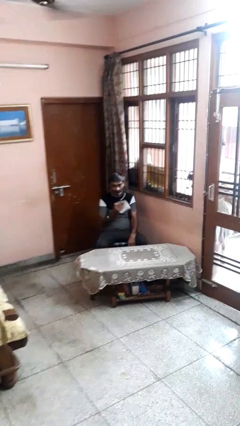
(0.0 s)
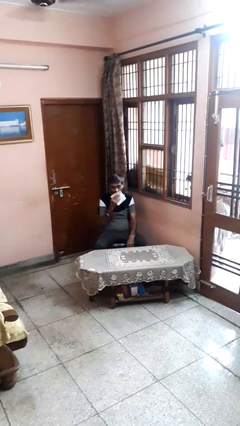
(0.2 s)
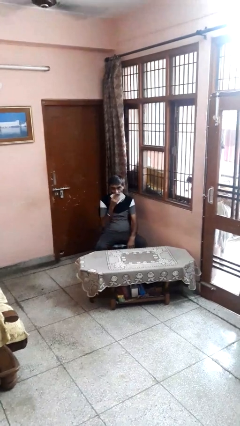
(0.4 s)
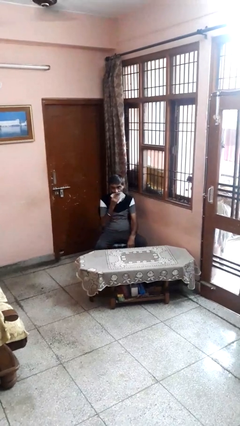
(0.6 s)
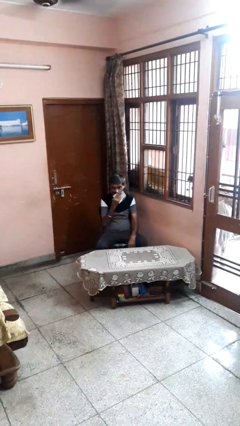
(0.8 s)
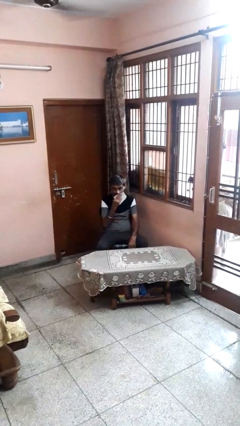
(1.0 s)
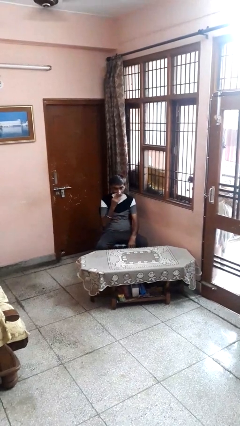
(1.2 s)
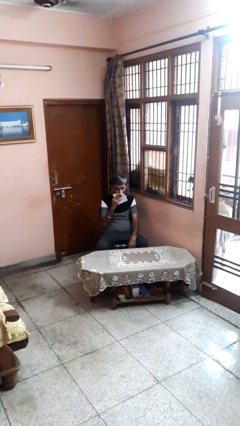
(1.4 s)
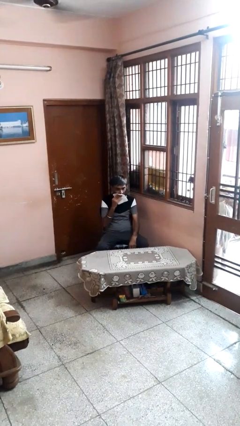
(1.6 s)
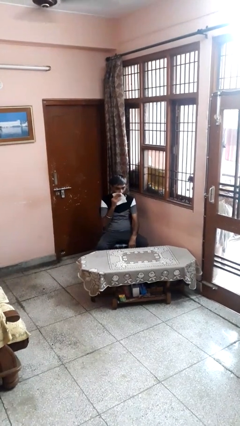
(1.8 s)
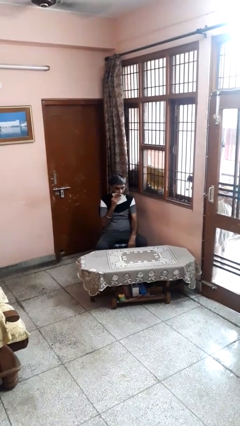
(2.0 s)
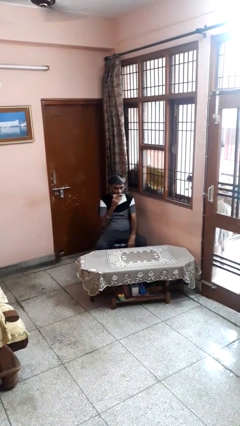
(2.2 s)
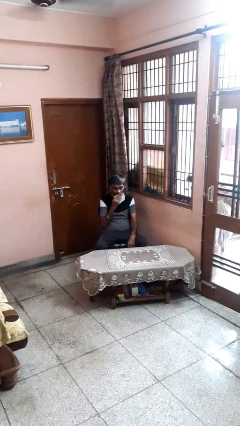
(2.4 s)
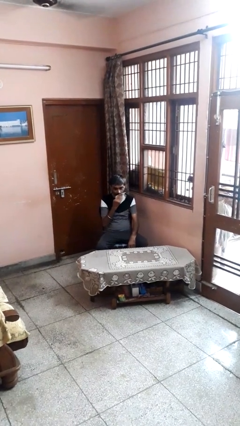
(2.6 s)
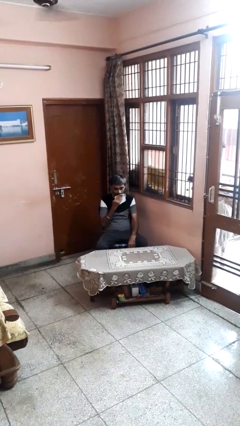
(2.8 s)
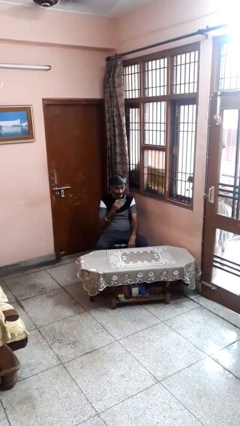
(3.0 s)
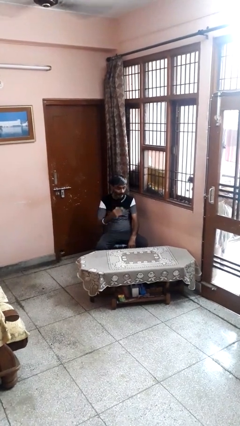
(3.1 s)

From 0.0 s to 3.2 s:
person wipes mouth with napkin

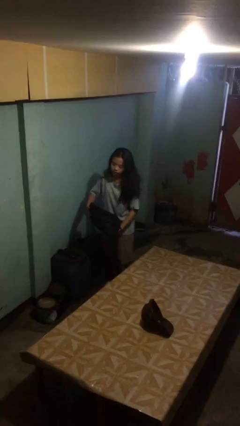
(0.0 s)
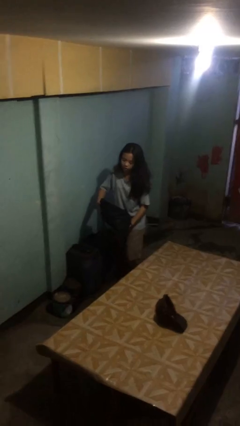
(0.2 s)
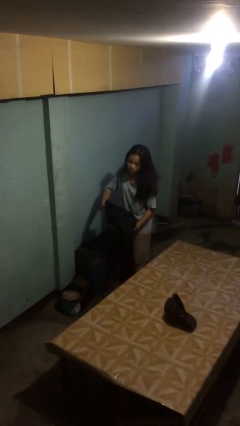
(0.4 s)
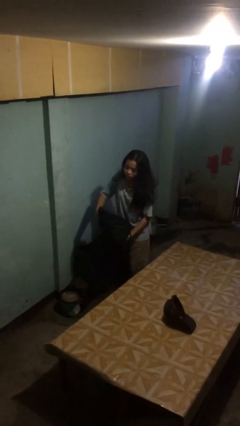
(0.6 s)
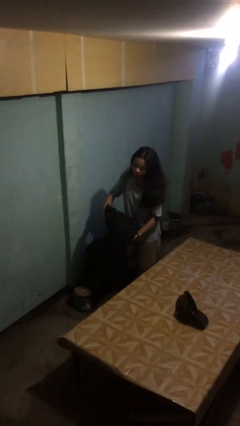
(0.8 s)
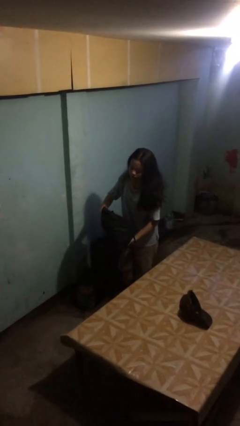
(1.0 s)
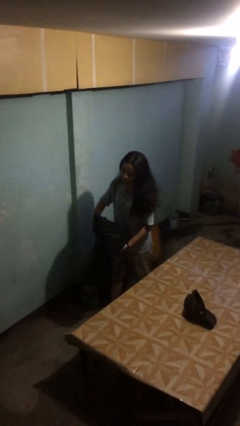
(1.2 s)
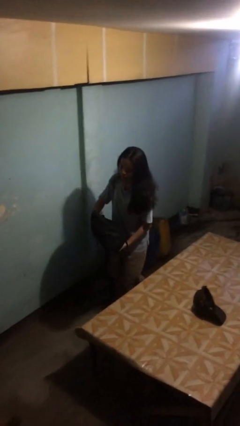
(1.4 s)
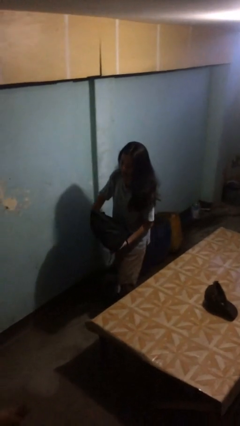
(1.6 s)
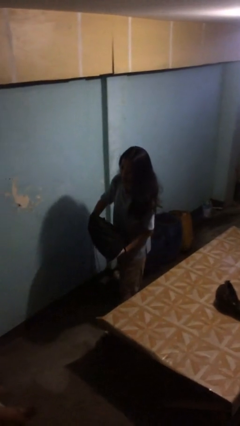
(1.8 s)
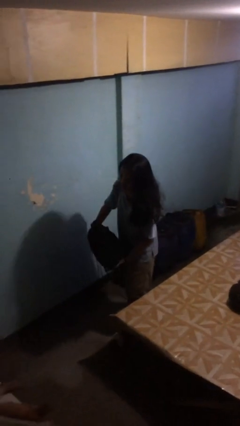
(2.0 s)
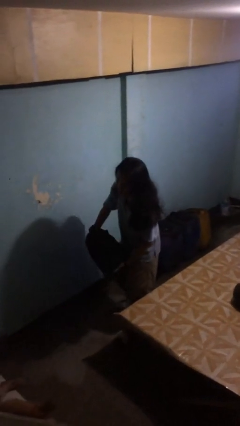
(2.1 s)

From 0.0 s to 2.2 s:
person carries heavy object

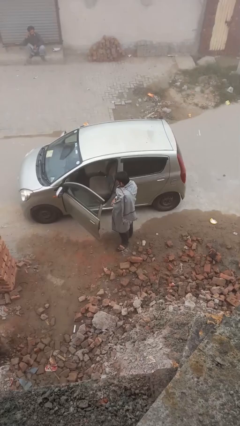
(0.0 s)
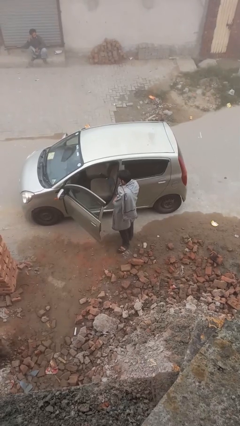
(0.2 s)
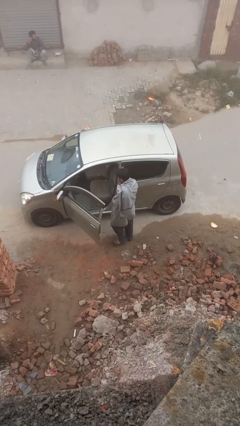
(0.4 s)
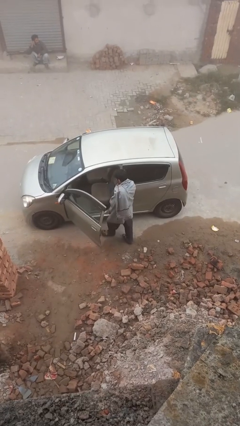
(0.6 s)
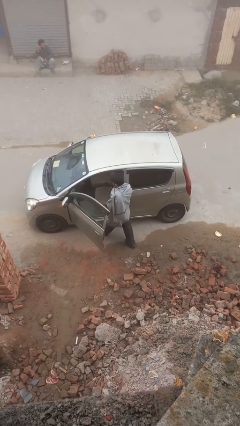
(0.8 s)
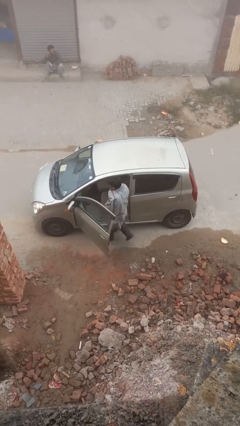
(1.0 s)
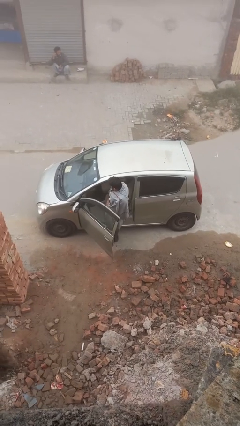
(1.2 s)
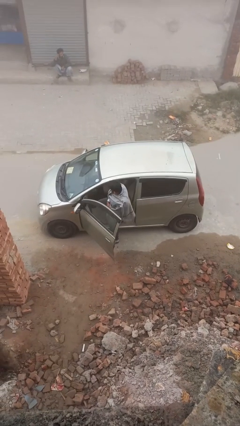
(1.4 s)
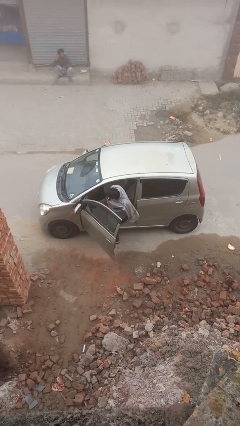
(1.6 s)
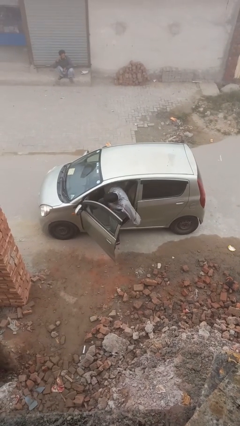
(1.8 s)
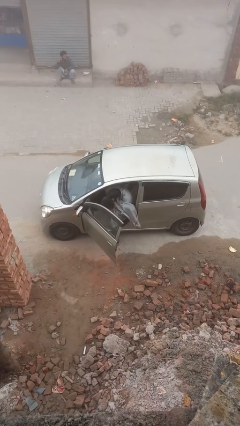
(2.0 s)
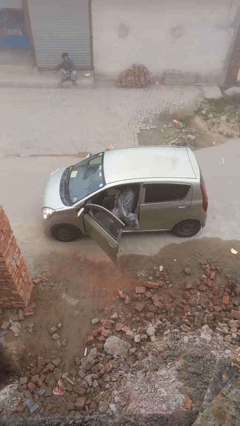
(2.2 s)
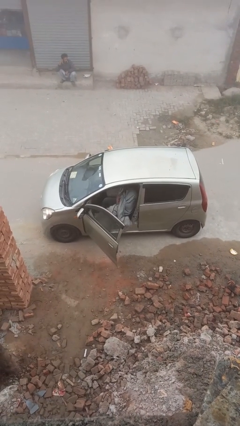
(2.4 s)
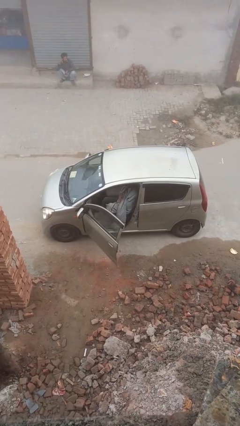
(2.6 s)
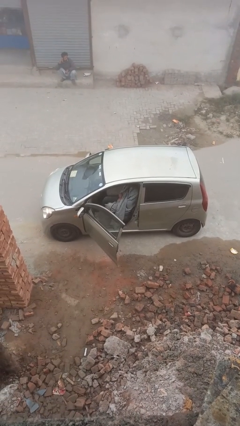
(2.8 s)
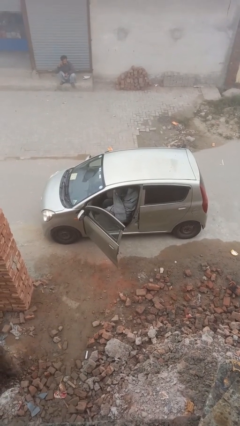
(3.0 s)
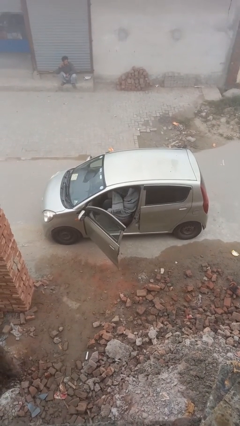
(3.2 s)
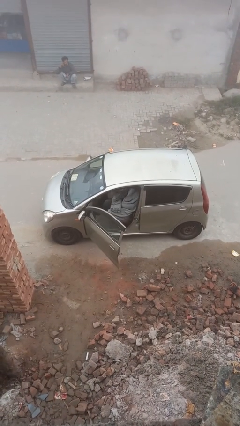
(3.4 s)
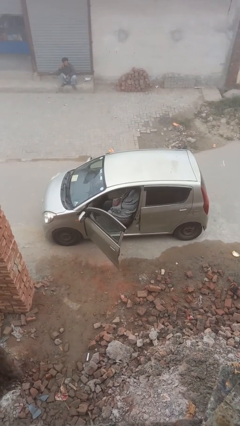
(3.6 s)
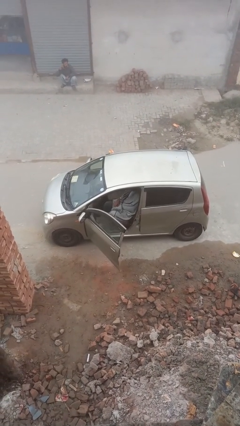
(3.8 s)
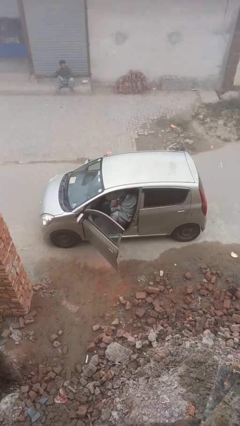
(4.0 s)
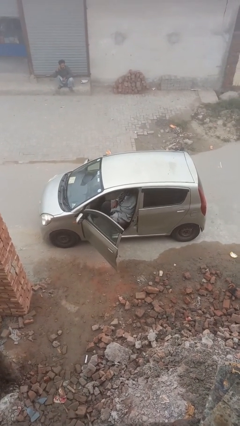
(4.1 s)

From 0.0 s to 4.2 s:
person enters car

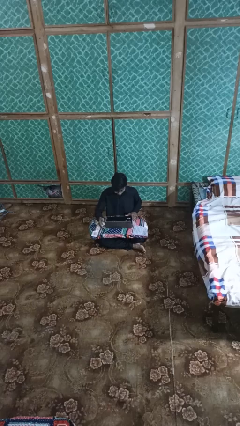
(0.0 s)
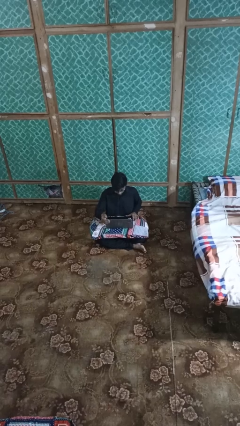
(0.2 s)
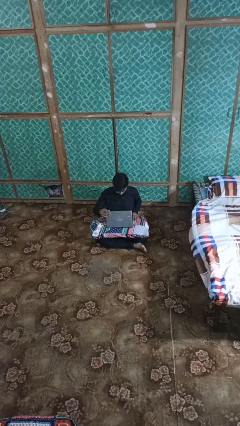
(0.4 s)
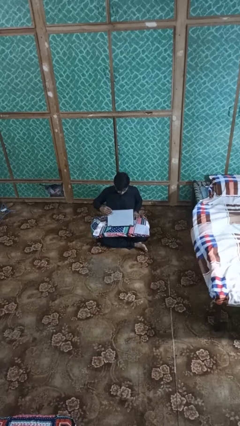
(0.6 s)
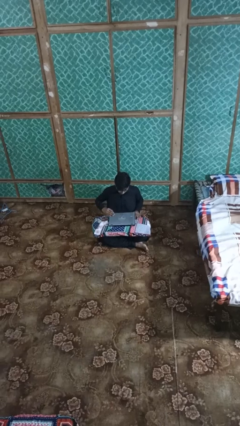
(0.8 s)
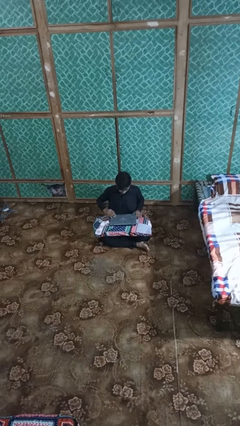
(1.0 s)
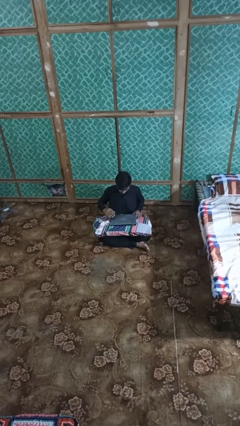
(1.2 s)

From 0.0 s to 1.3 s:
person closes laptop

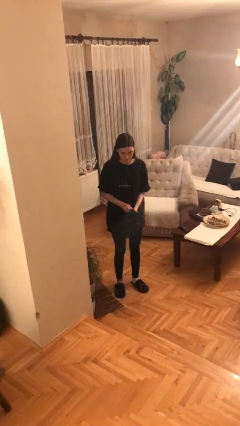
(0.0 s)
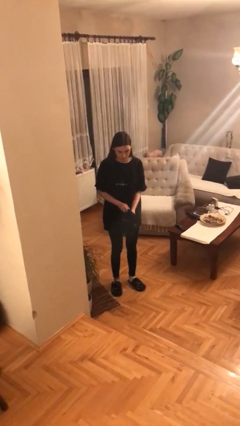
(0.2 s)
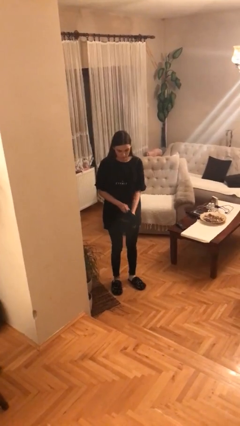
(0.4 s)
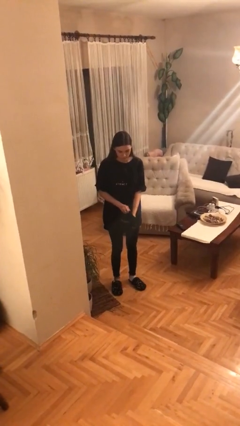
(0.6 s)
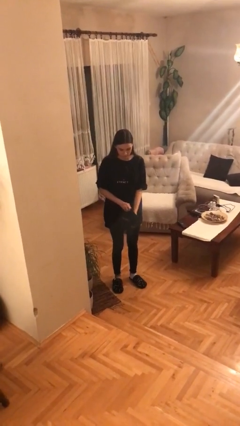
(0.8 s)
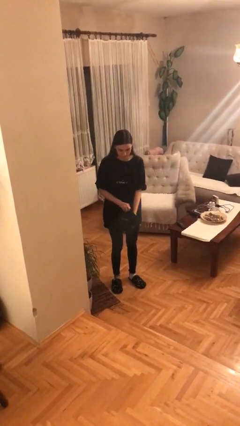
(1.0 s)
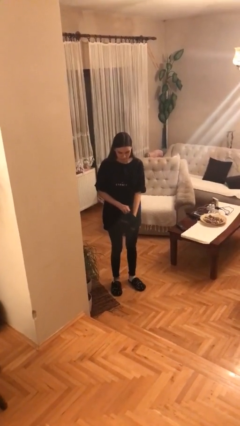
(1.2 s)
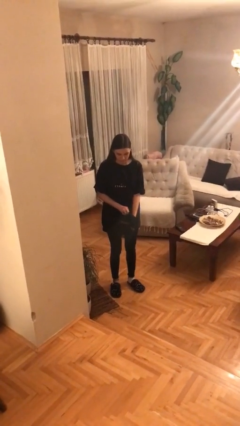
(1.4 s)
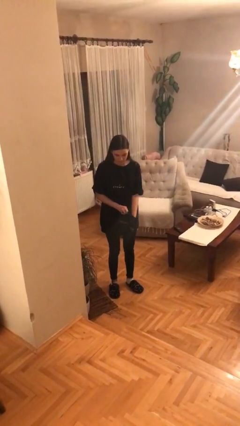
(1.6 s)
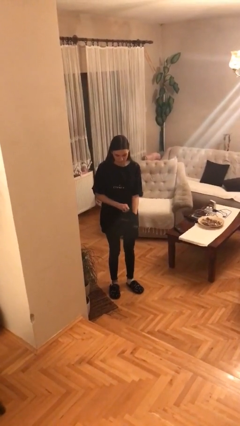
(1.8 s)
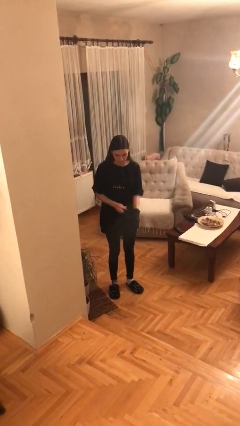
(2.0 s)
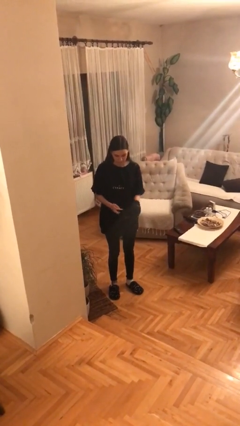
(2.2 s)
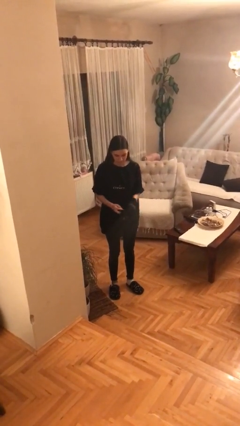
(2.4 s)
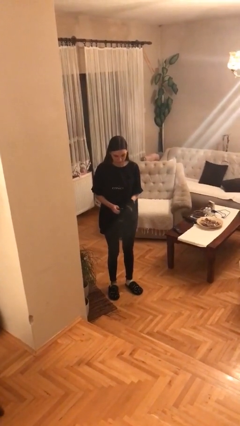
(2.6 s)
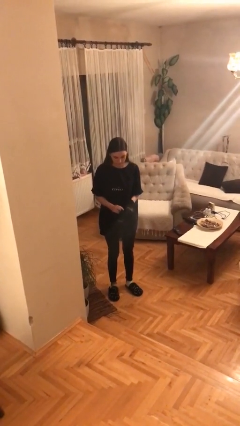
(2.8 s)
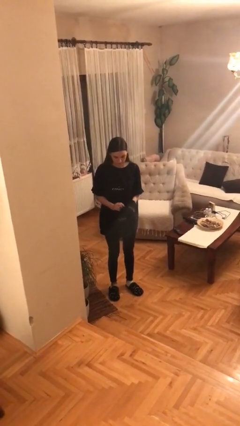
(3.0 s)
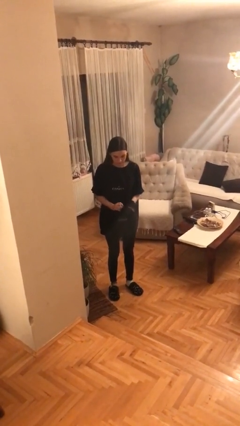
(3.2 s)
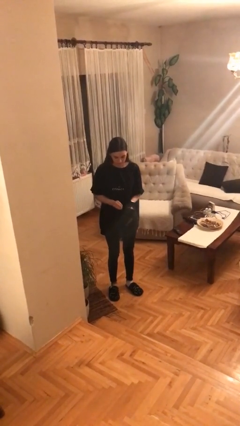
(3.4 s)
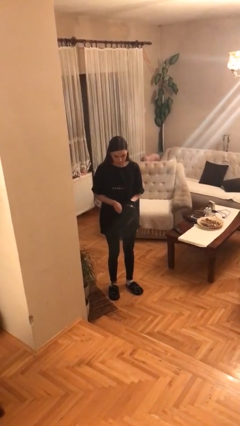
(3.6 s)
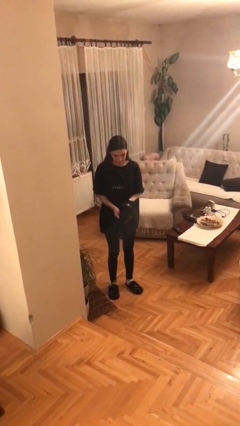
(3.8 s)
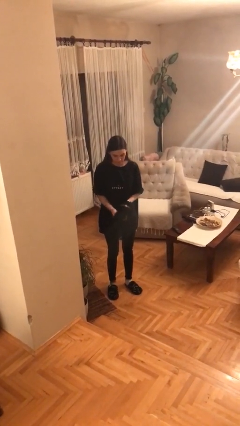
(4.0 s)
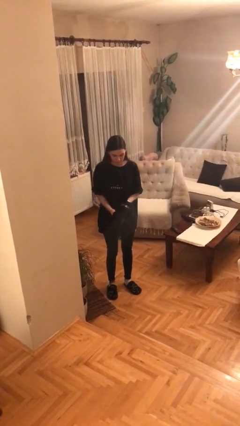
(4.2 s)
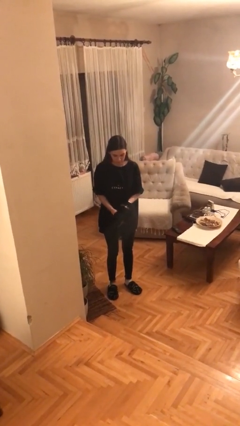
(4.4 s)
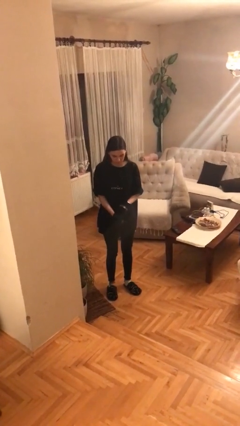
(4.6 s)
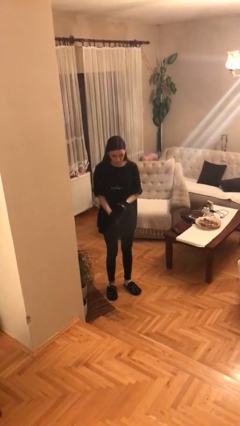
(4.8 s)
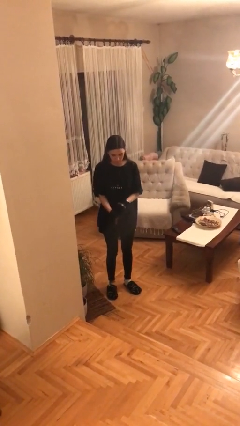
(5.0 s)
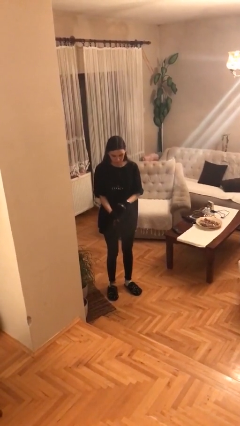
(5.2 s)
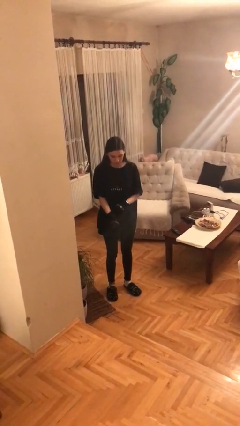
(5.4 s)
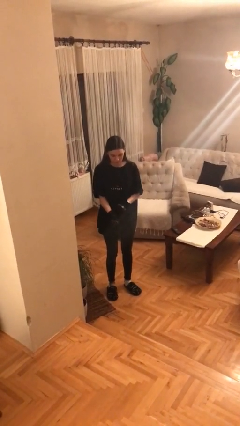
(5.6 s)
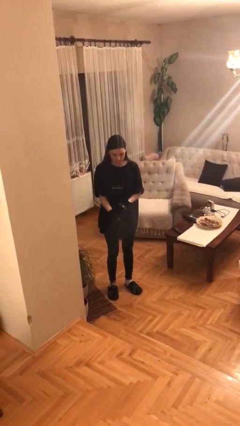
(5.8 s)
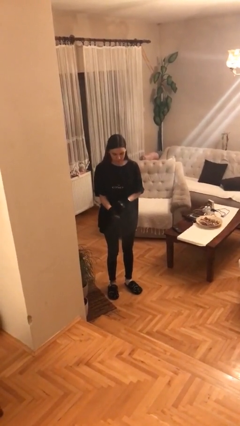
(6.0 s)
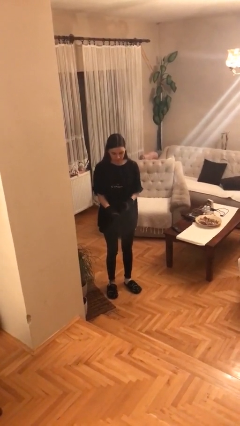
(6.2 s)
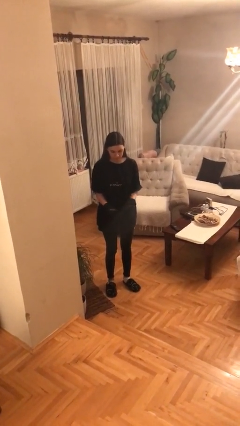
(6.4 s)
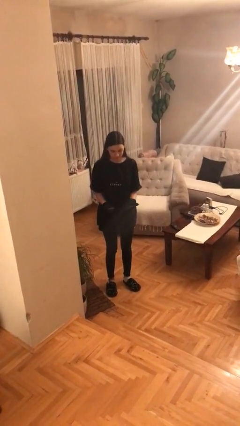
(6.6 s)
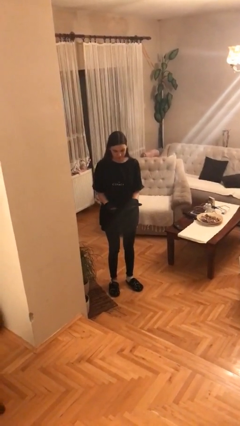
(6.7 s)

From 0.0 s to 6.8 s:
person puts on gloves
